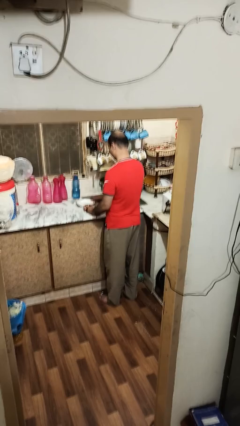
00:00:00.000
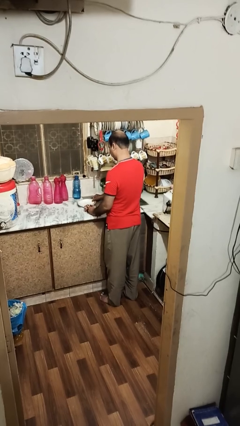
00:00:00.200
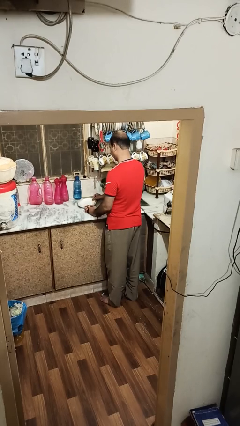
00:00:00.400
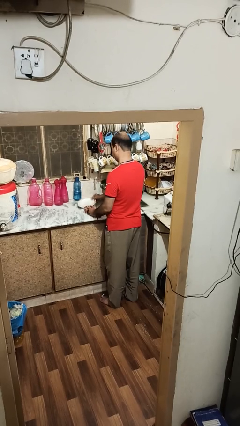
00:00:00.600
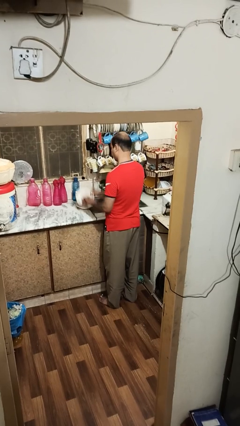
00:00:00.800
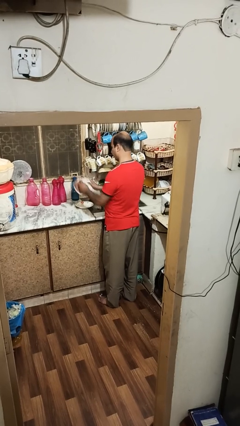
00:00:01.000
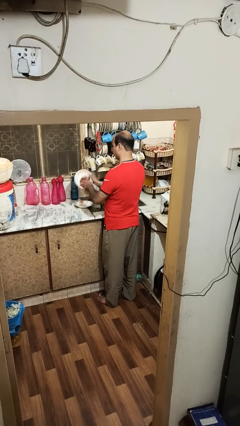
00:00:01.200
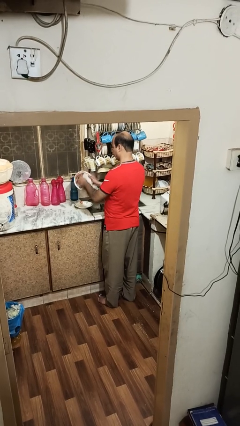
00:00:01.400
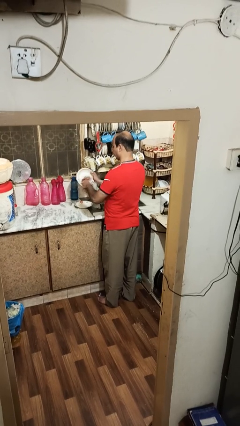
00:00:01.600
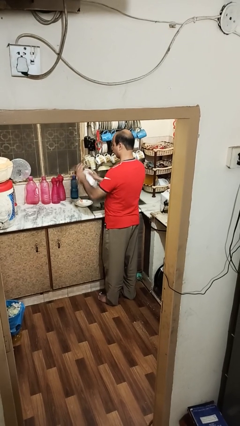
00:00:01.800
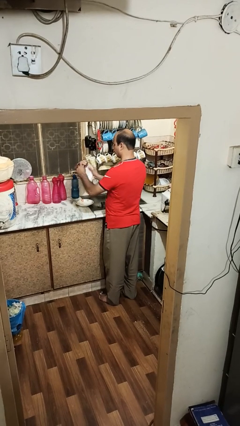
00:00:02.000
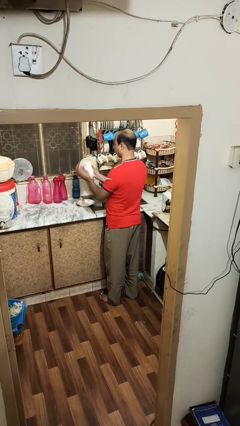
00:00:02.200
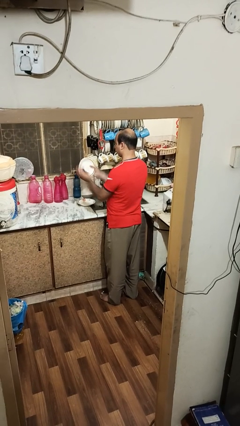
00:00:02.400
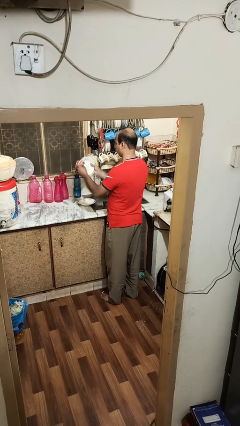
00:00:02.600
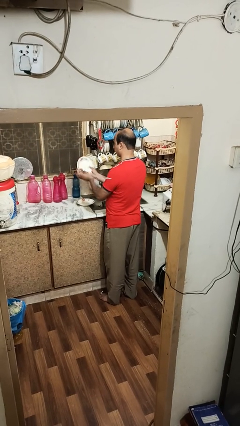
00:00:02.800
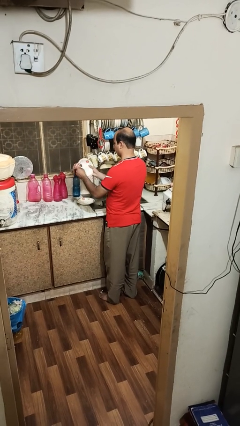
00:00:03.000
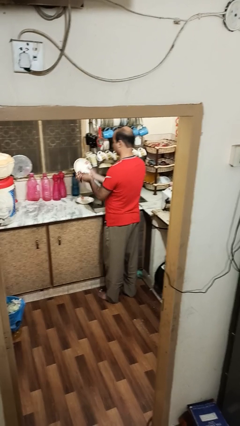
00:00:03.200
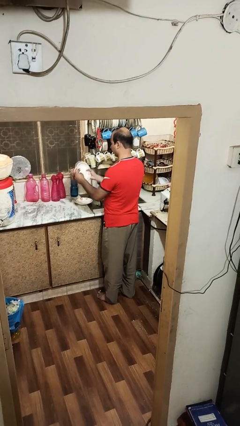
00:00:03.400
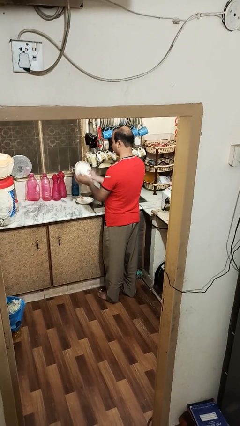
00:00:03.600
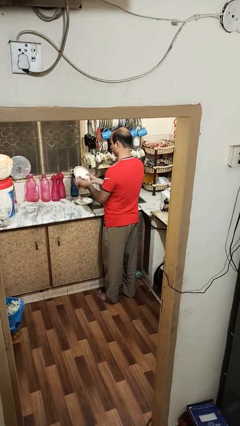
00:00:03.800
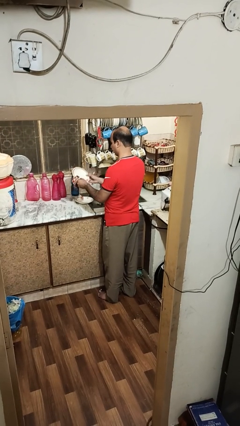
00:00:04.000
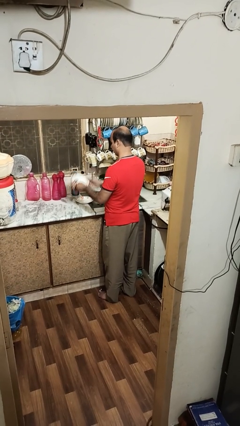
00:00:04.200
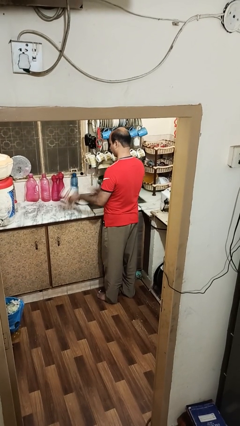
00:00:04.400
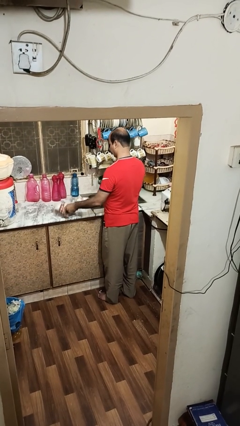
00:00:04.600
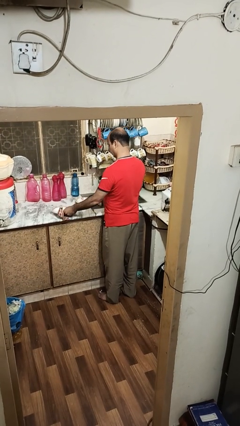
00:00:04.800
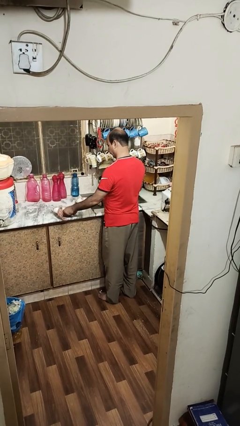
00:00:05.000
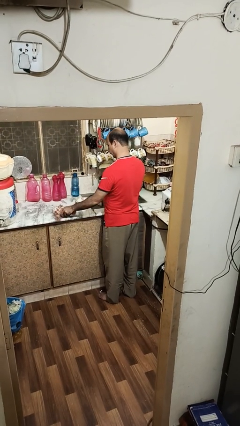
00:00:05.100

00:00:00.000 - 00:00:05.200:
person dries dish

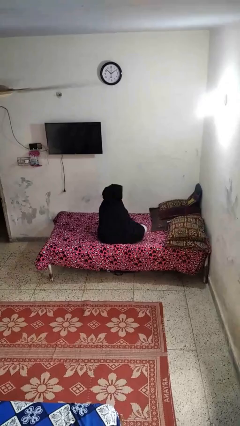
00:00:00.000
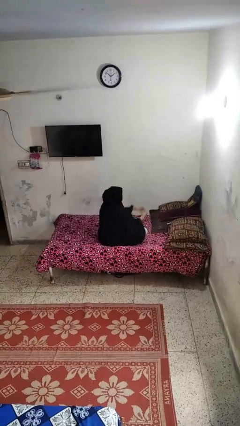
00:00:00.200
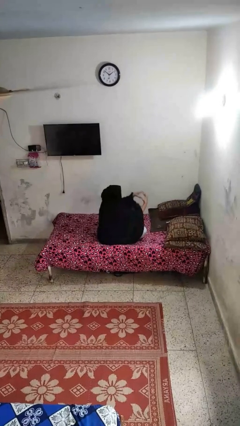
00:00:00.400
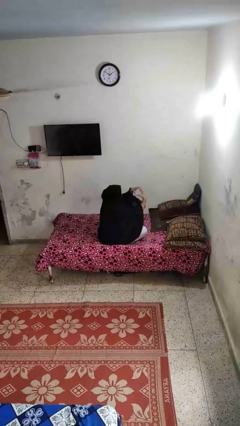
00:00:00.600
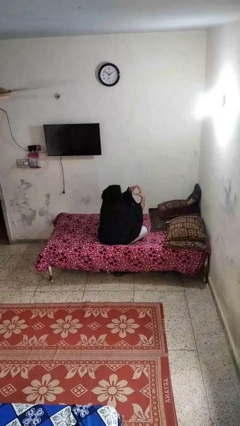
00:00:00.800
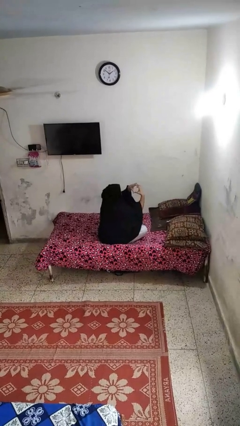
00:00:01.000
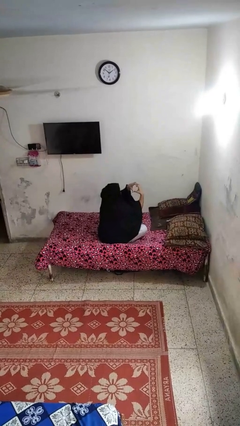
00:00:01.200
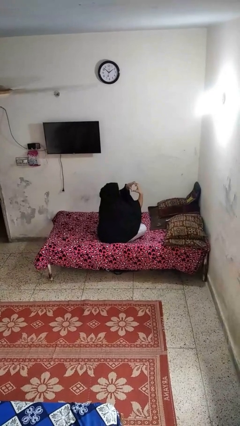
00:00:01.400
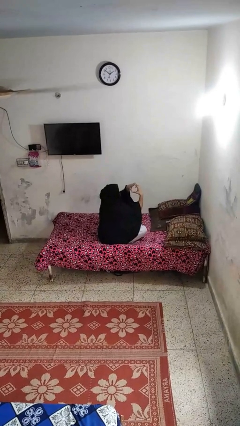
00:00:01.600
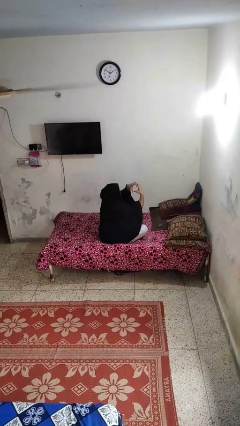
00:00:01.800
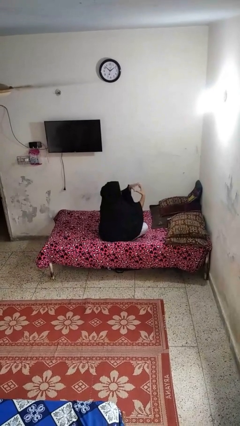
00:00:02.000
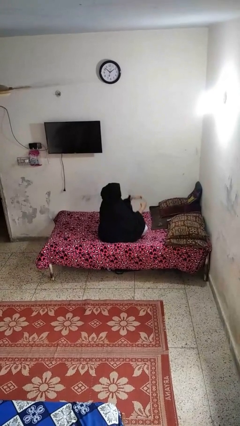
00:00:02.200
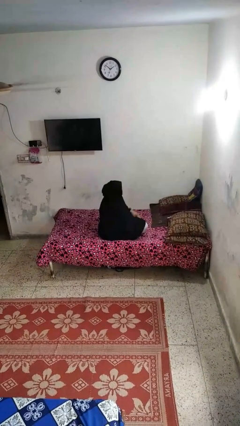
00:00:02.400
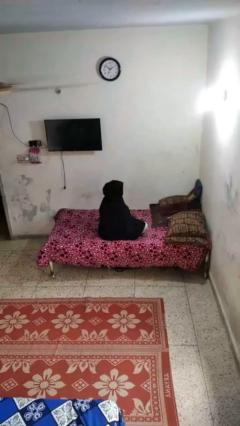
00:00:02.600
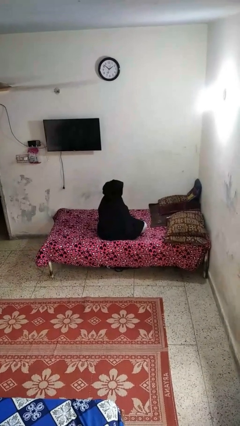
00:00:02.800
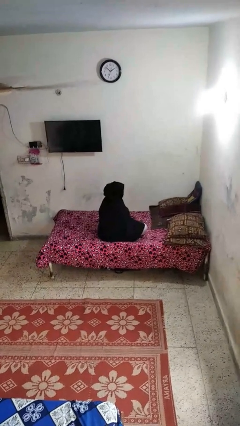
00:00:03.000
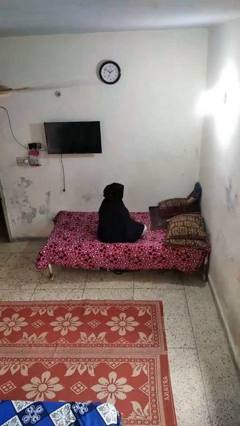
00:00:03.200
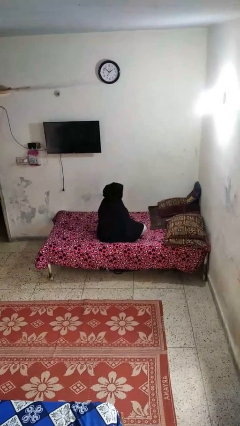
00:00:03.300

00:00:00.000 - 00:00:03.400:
person gestures heart

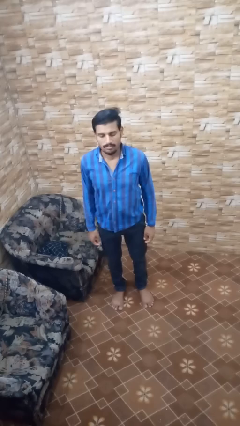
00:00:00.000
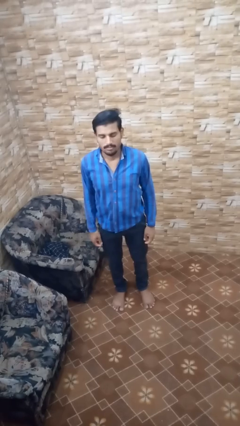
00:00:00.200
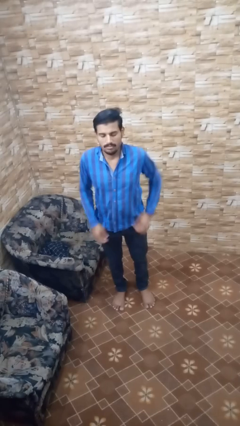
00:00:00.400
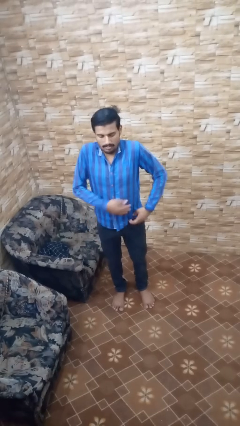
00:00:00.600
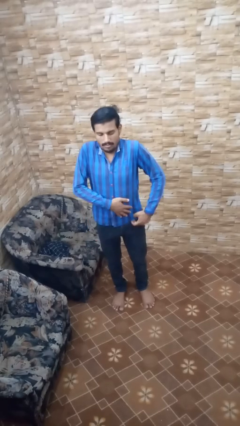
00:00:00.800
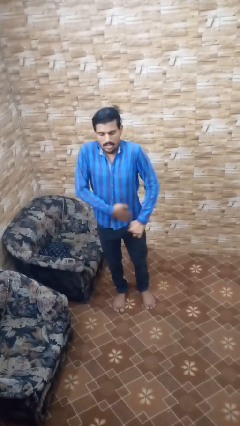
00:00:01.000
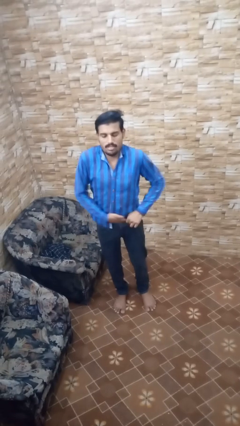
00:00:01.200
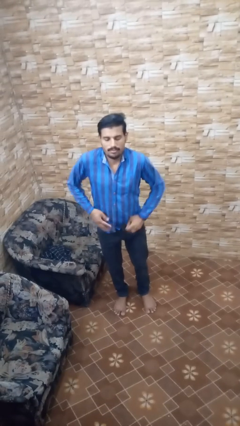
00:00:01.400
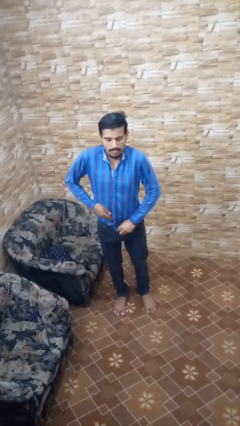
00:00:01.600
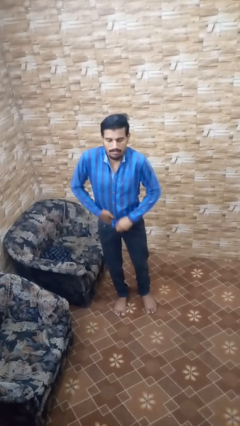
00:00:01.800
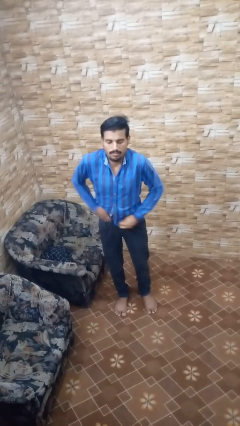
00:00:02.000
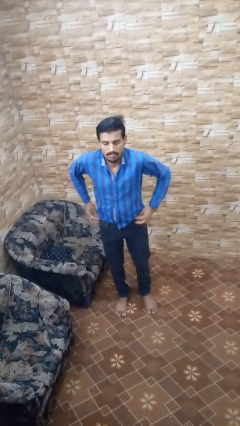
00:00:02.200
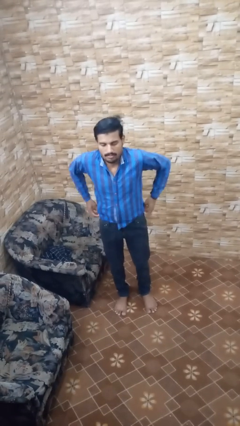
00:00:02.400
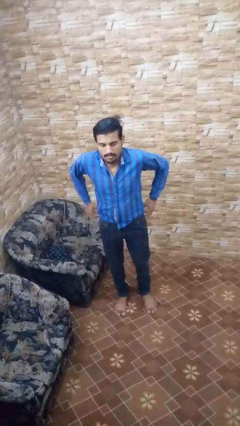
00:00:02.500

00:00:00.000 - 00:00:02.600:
person tucks in shirt

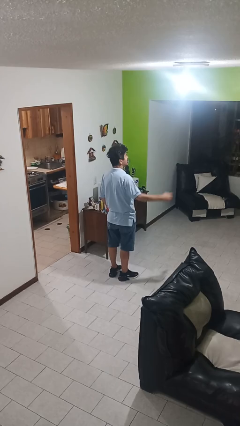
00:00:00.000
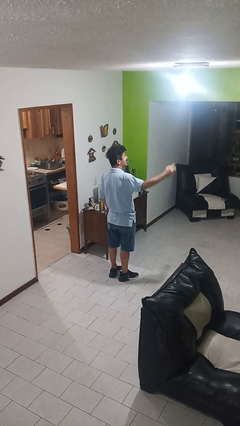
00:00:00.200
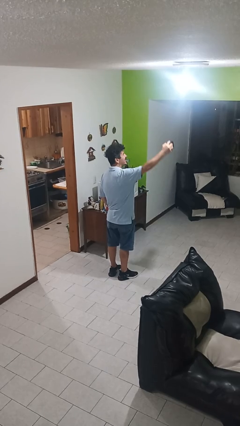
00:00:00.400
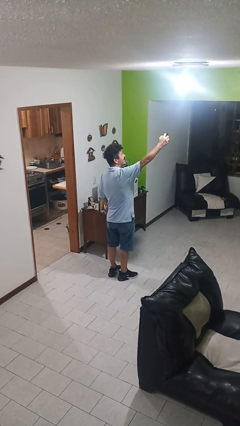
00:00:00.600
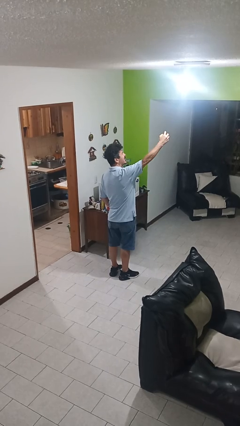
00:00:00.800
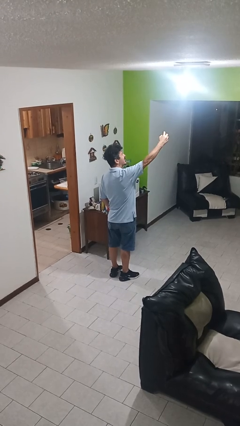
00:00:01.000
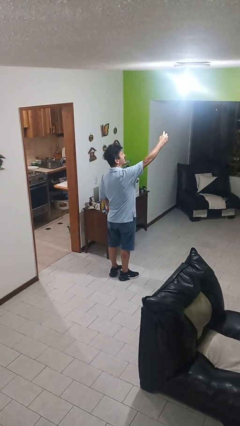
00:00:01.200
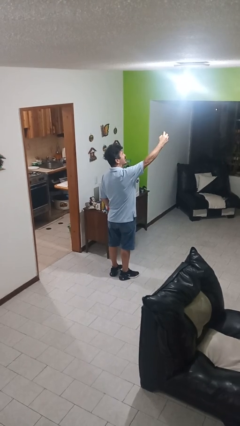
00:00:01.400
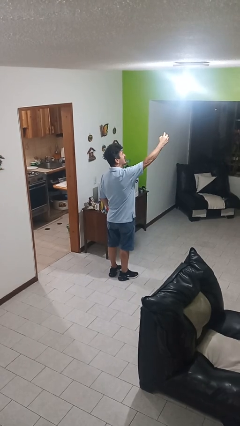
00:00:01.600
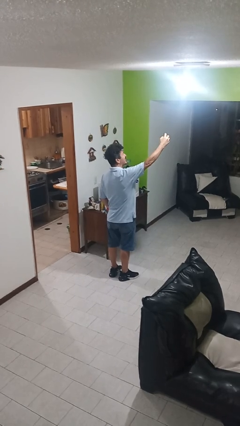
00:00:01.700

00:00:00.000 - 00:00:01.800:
person takes selfie

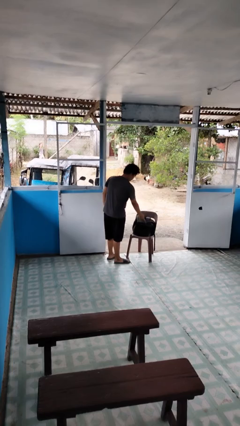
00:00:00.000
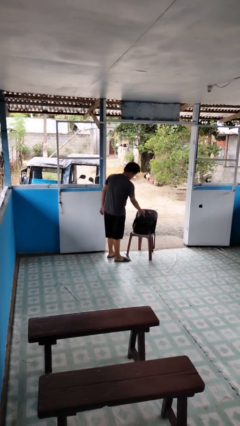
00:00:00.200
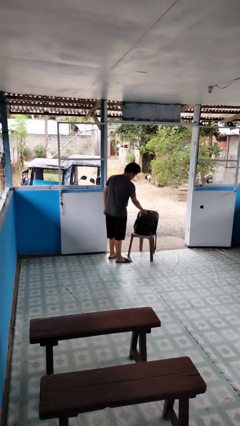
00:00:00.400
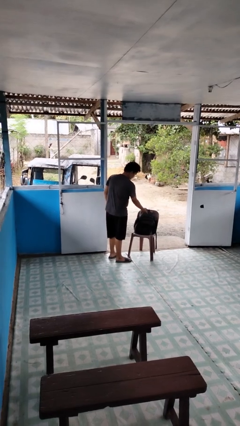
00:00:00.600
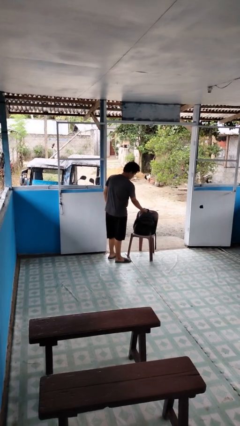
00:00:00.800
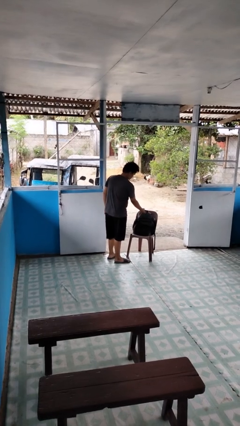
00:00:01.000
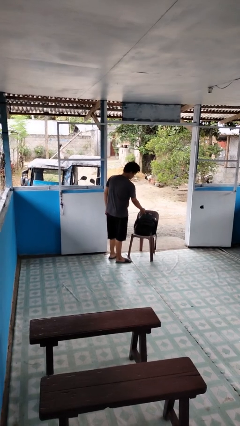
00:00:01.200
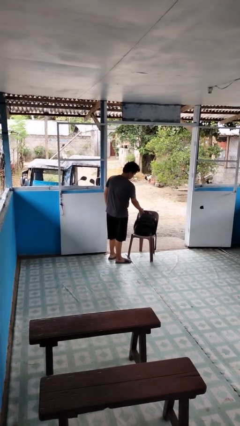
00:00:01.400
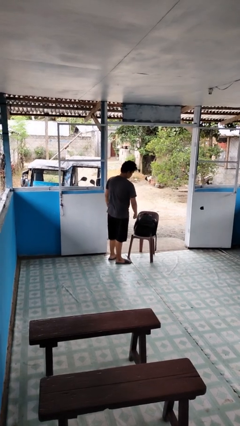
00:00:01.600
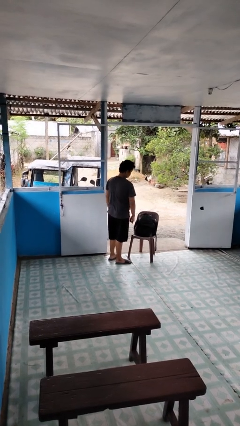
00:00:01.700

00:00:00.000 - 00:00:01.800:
person taps object with finger

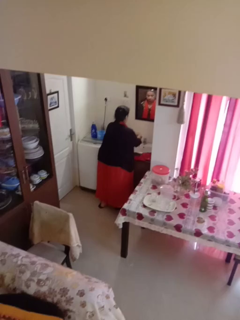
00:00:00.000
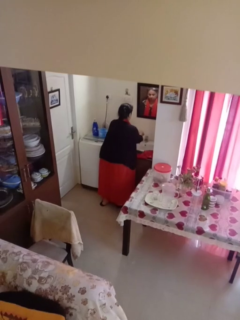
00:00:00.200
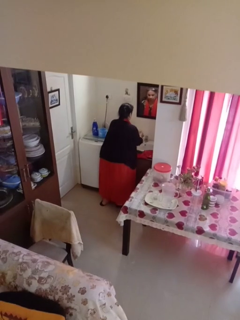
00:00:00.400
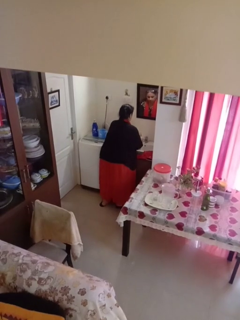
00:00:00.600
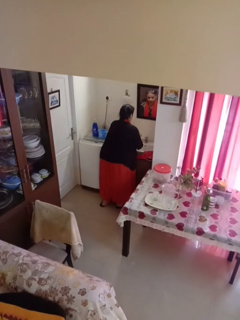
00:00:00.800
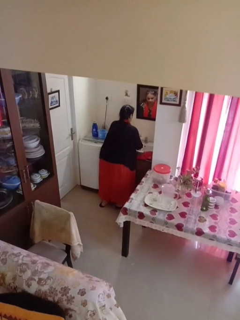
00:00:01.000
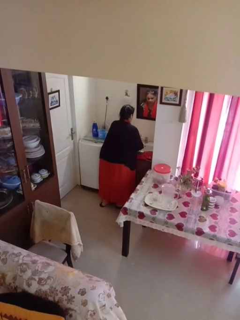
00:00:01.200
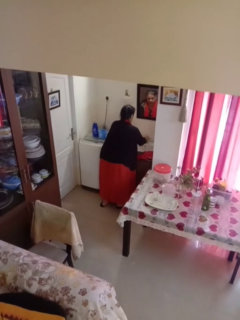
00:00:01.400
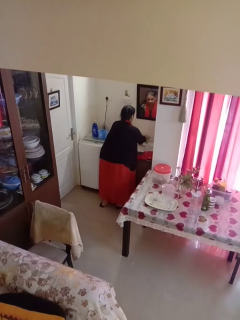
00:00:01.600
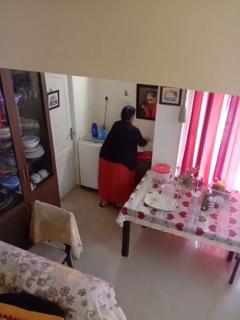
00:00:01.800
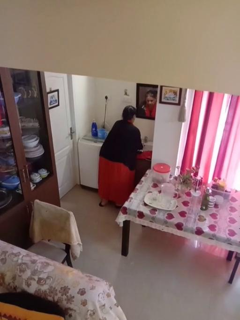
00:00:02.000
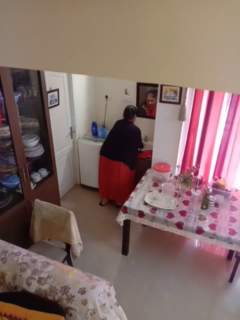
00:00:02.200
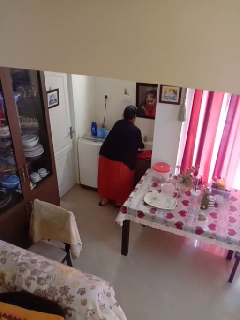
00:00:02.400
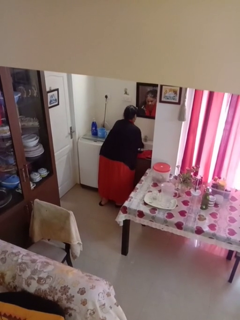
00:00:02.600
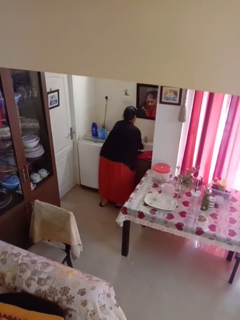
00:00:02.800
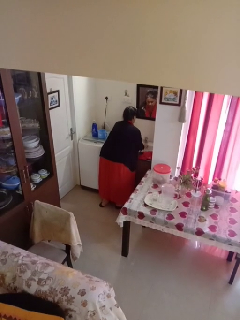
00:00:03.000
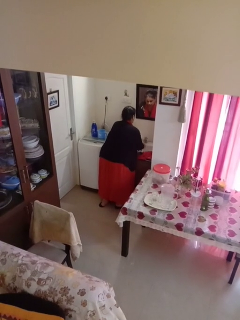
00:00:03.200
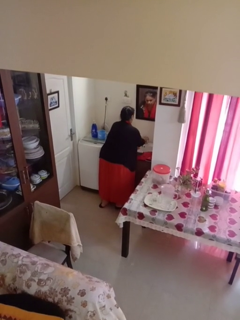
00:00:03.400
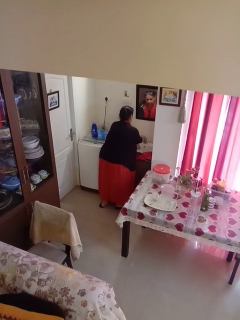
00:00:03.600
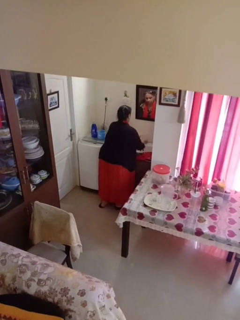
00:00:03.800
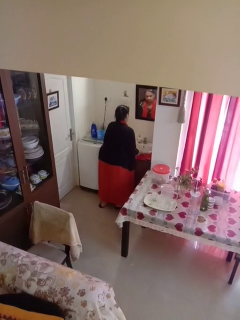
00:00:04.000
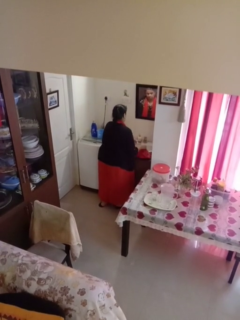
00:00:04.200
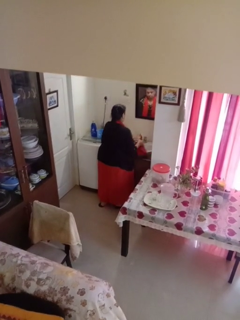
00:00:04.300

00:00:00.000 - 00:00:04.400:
person washes hands
